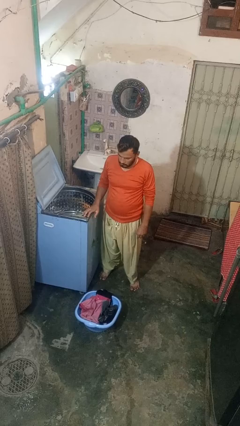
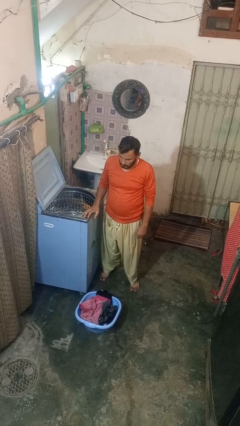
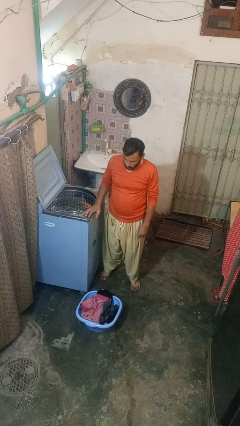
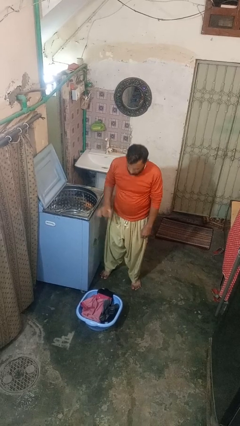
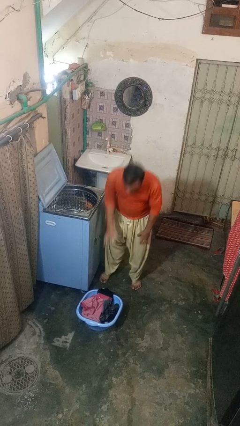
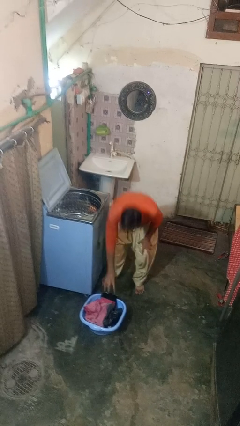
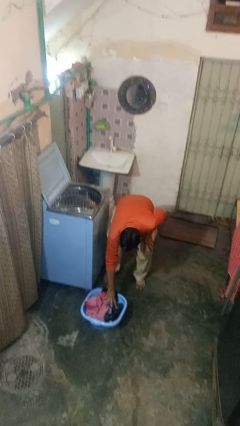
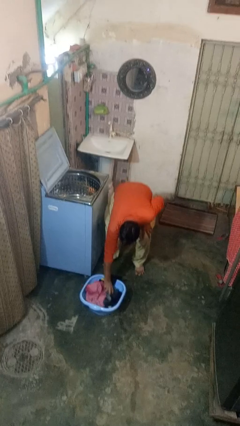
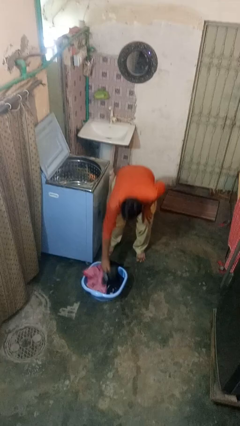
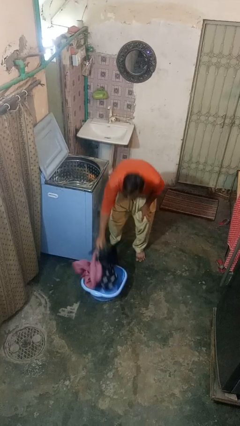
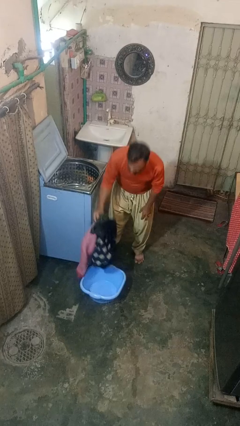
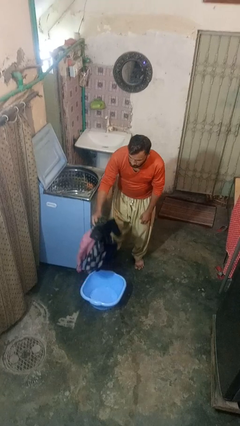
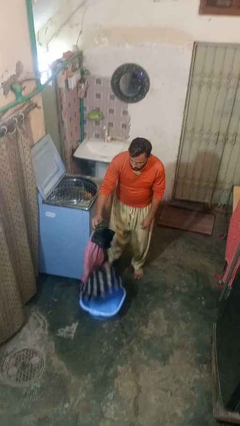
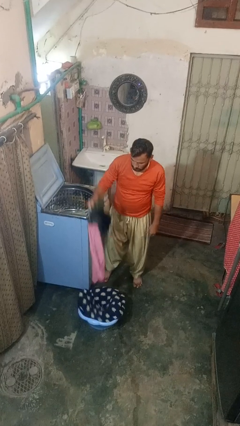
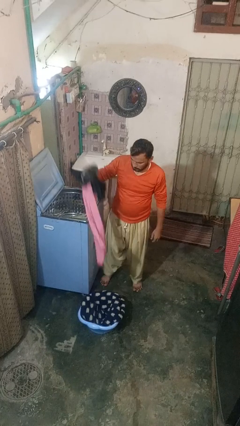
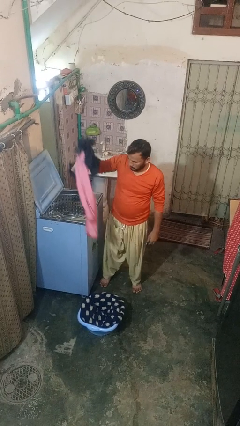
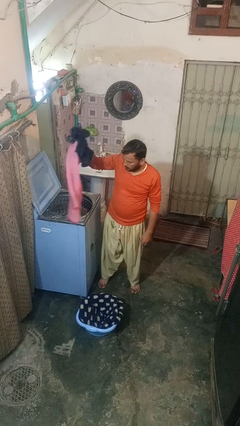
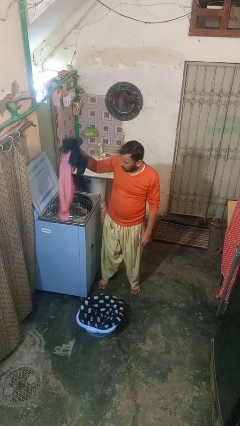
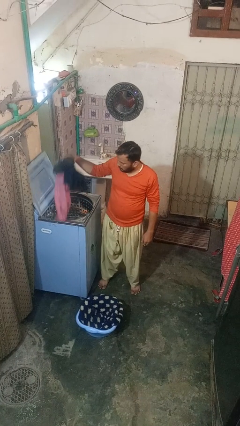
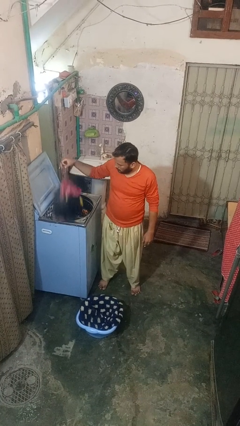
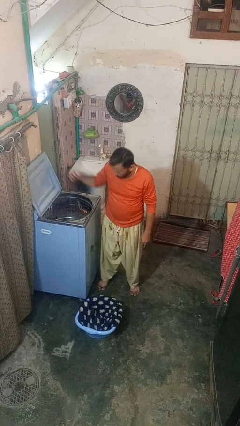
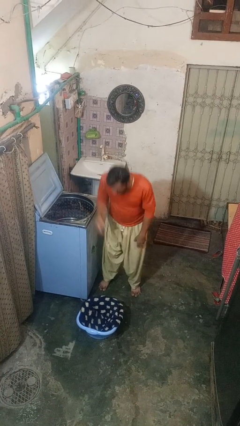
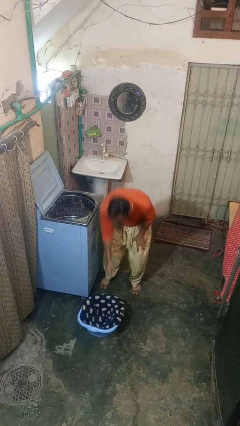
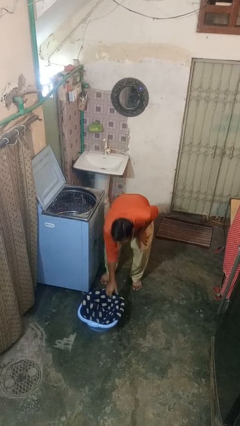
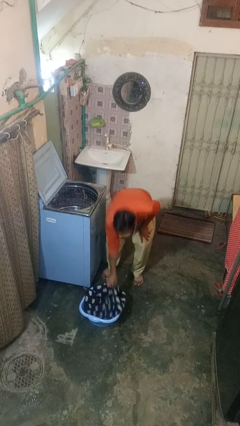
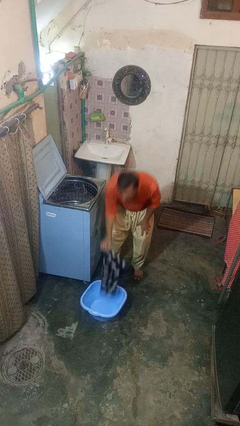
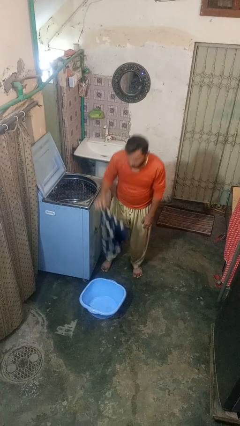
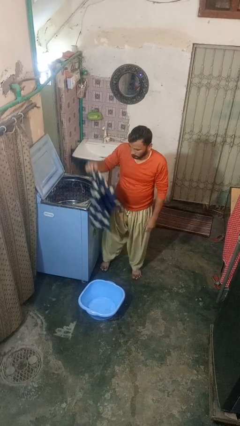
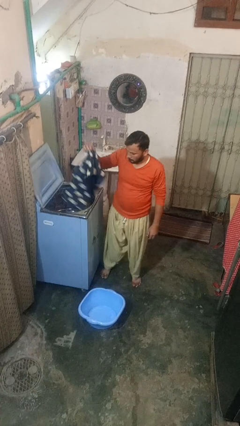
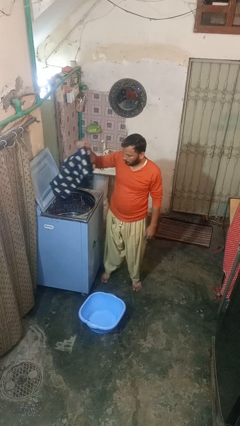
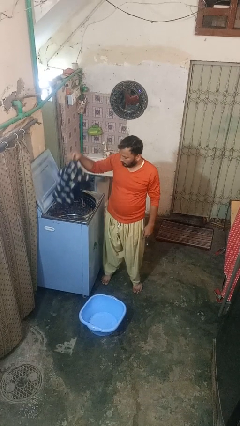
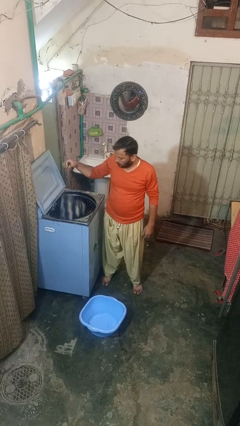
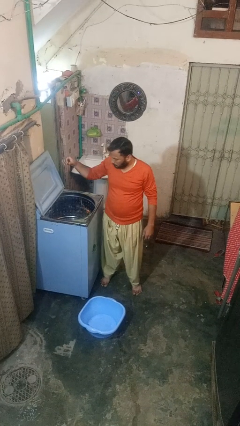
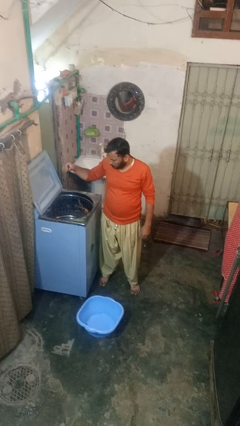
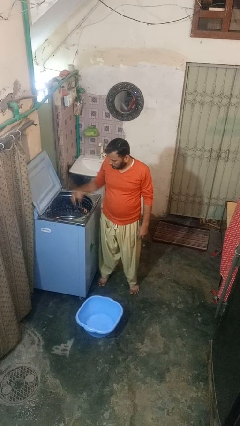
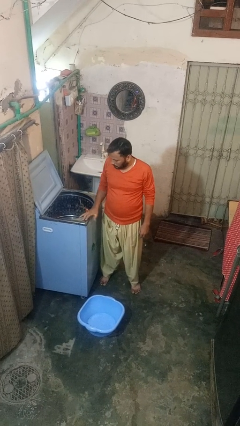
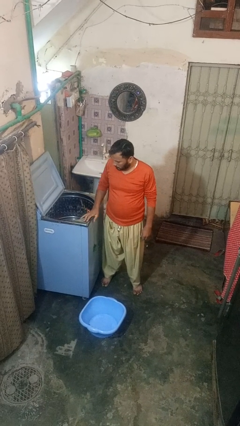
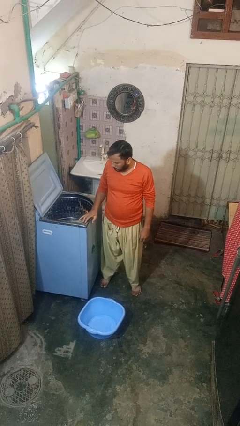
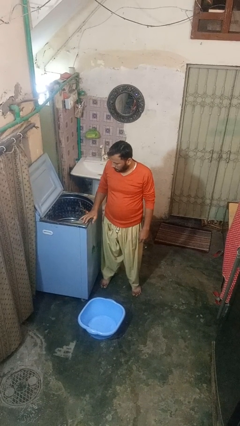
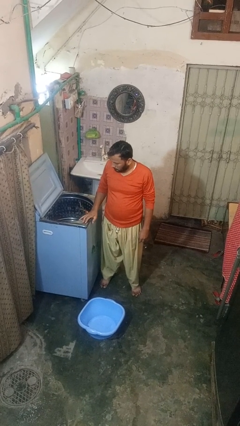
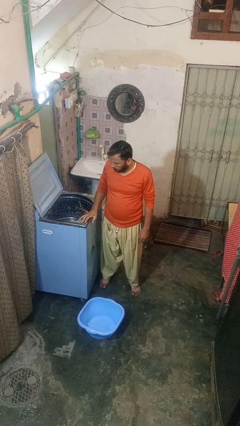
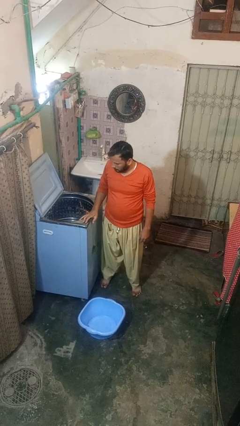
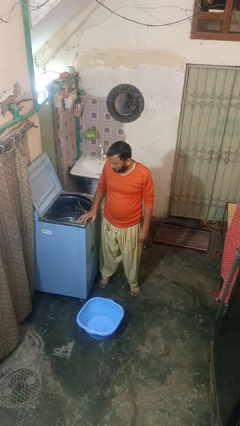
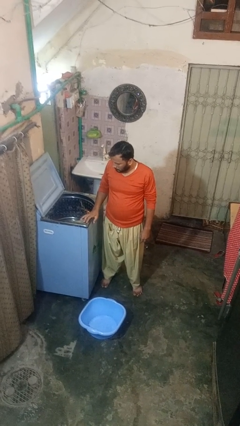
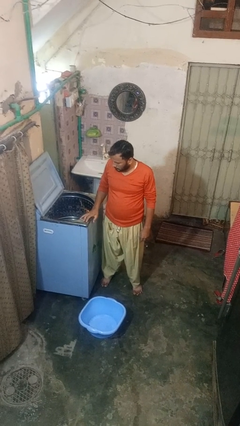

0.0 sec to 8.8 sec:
person loads clotheswasher

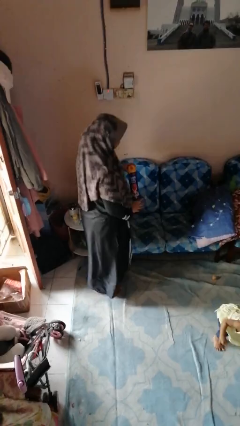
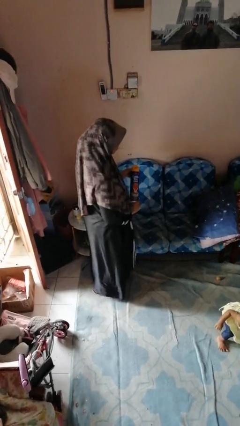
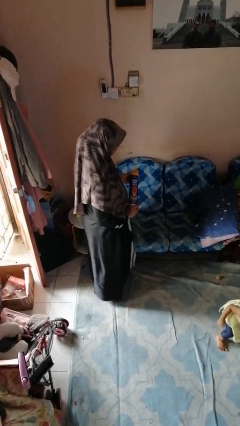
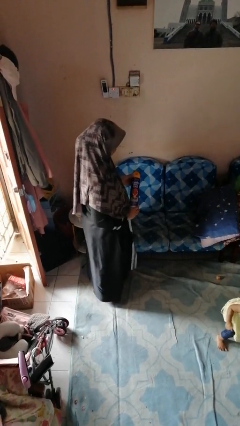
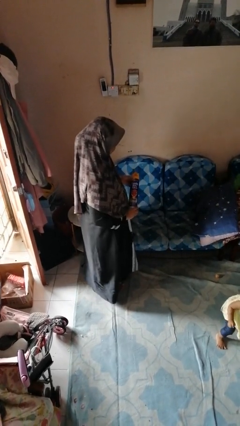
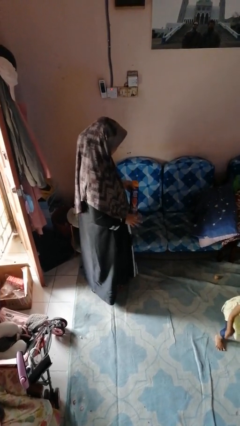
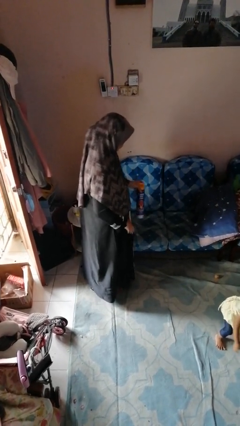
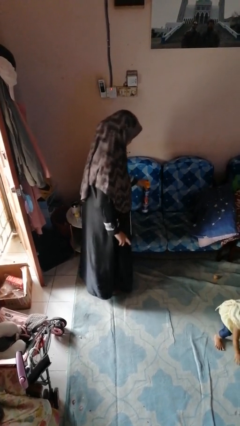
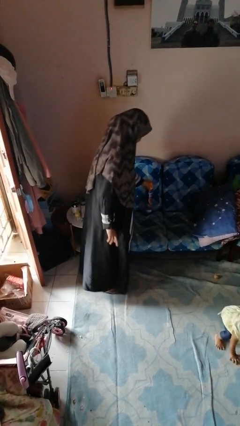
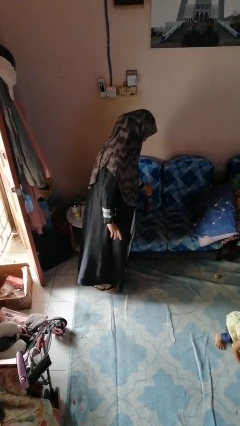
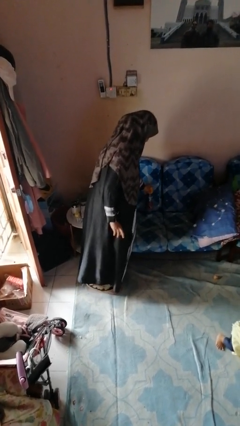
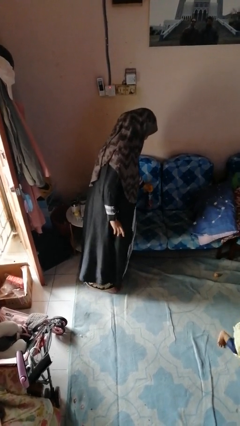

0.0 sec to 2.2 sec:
person puts down object on couch

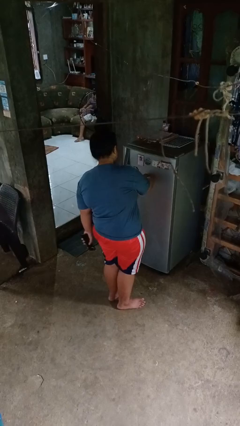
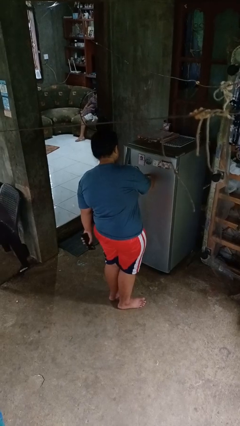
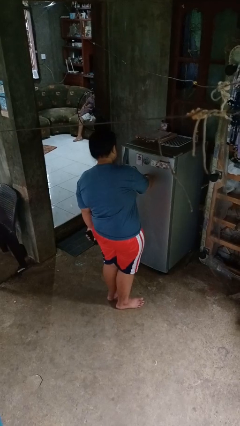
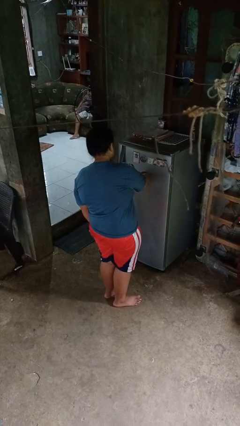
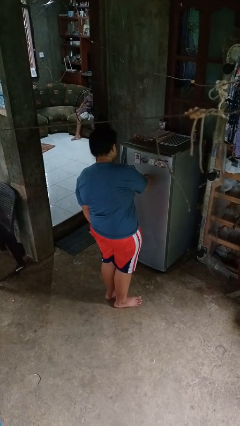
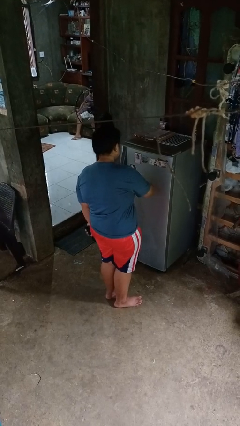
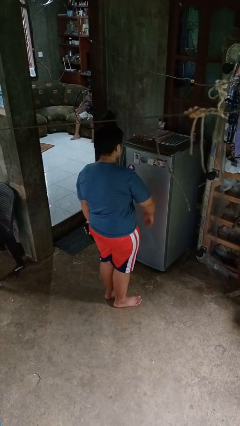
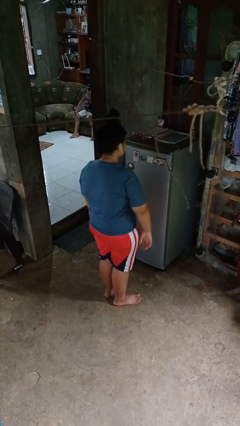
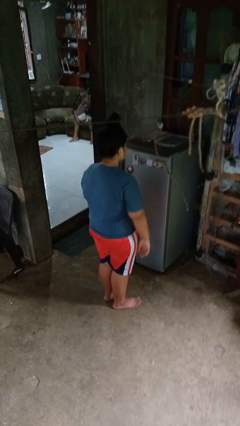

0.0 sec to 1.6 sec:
person taps object with finger

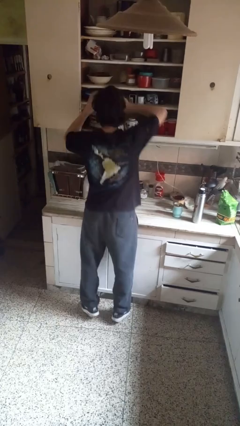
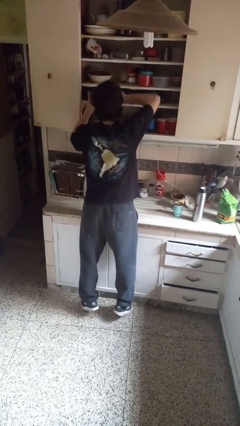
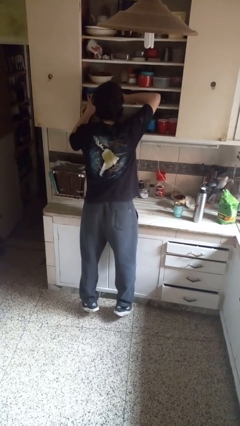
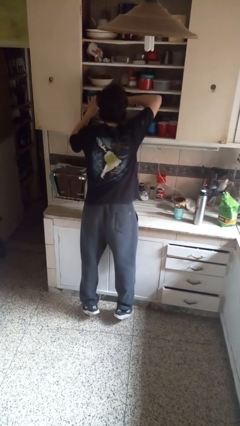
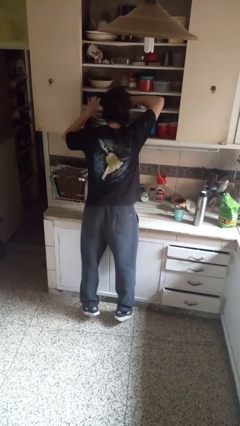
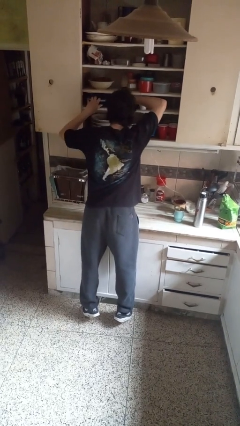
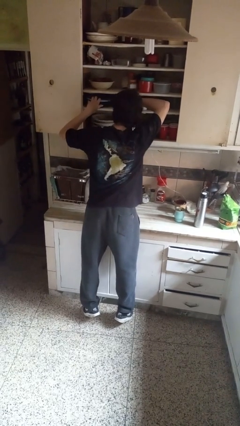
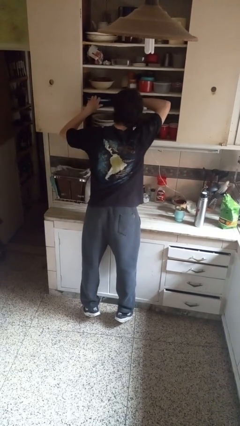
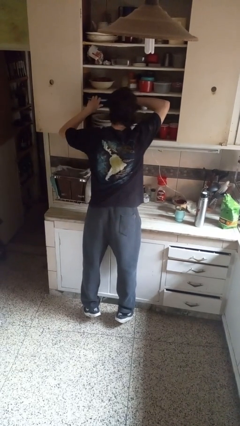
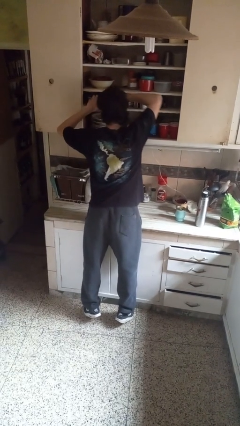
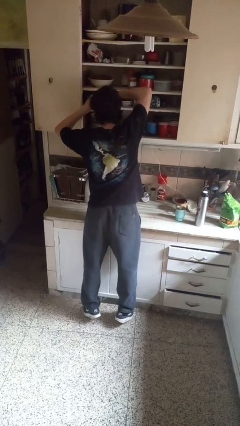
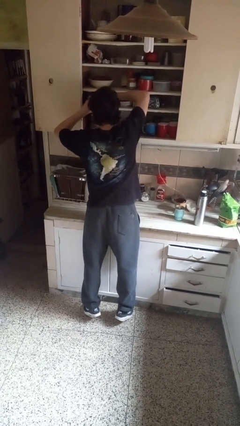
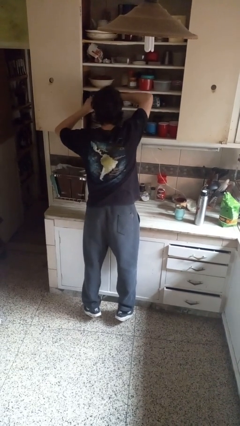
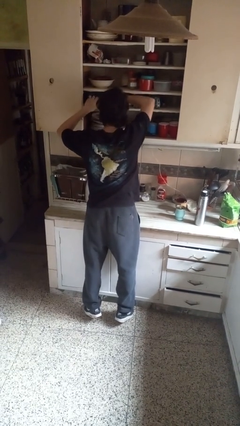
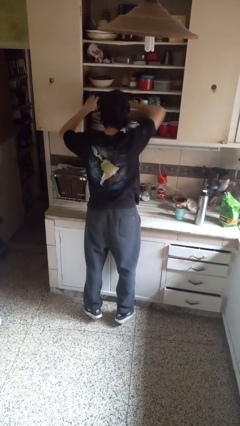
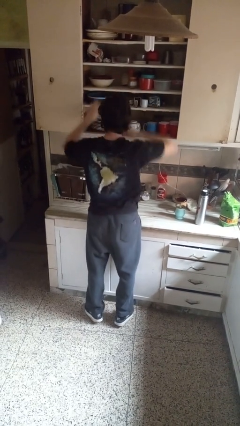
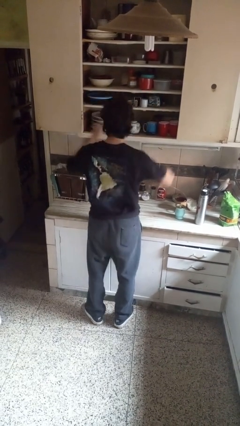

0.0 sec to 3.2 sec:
person searches in cabinet

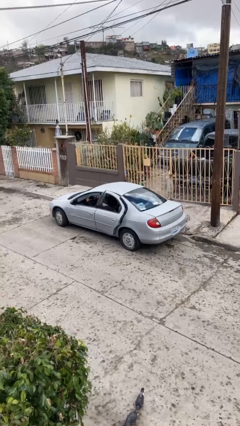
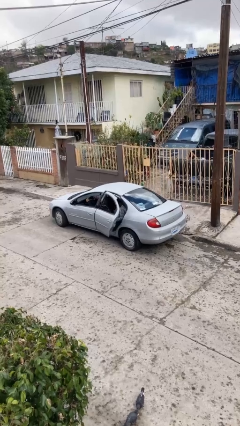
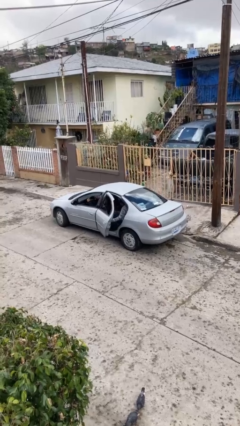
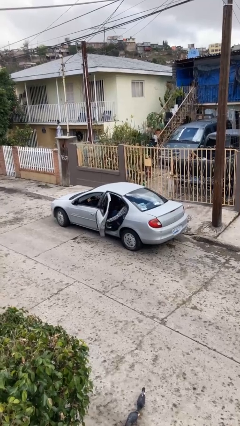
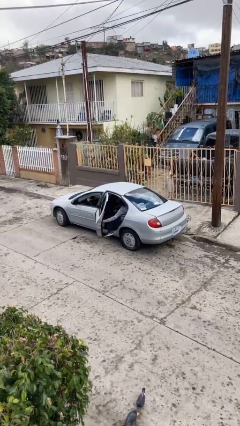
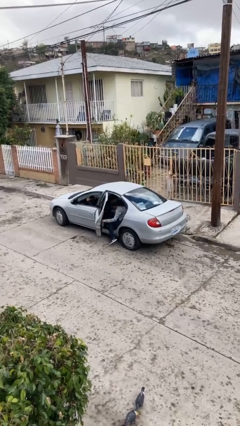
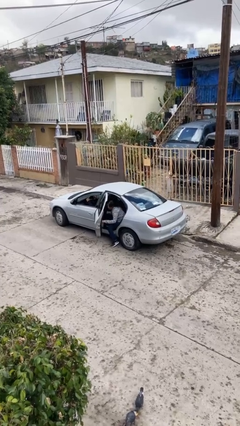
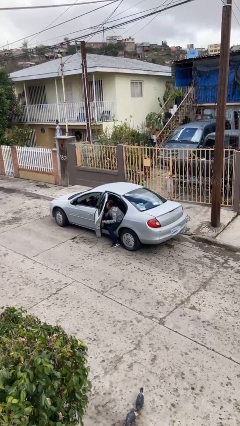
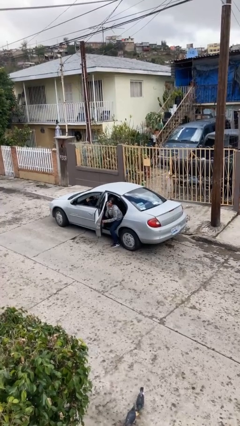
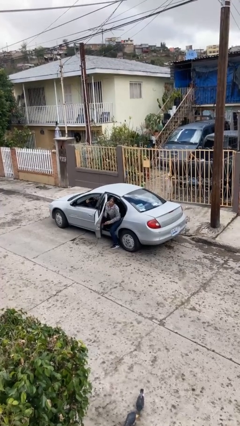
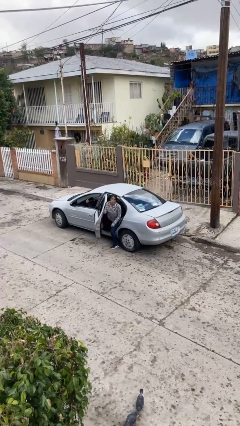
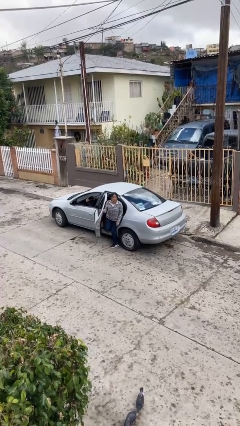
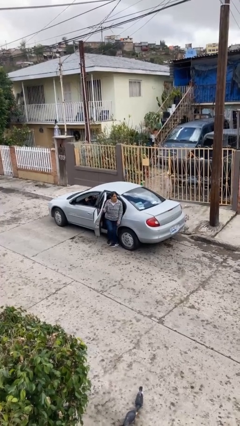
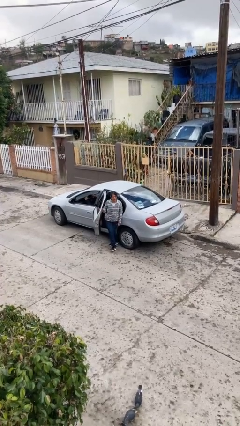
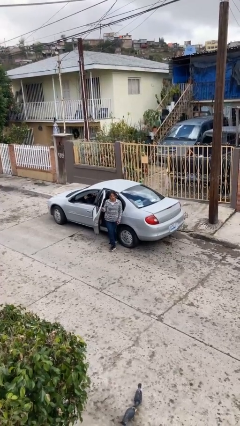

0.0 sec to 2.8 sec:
car drops off person
